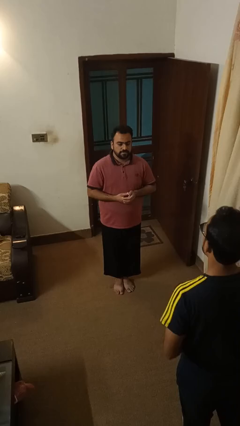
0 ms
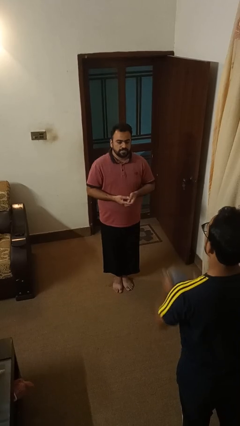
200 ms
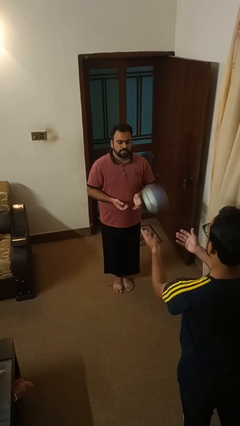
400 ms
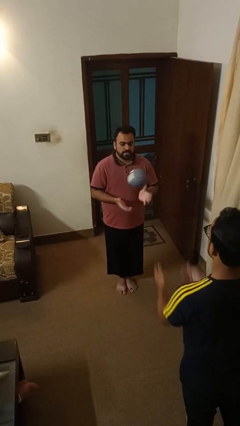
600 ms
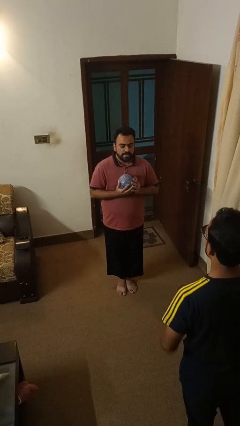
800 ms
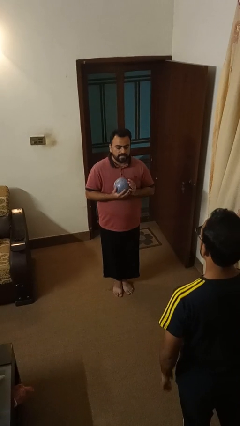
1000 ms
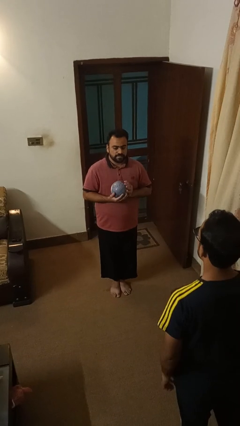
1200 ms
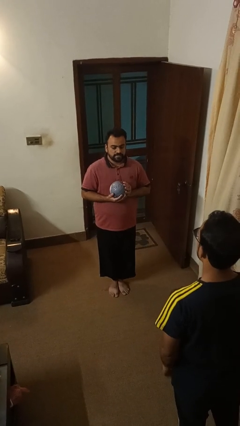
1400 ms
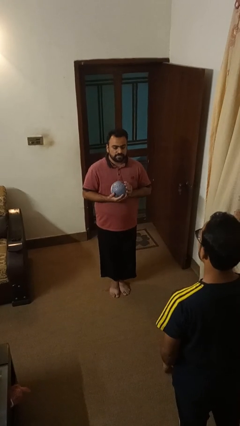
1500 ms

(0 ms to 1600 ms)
person catches object from person

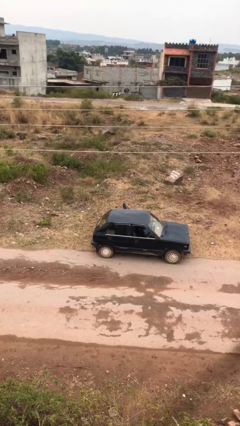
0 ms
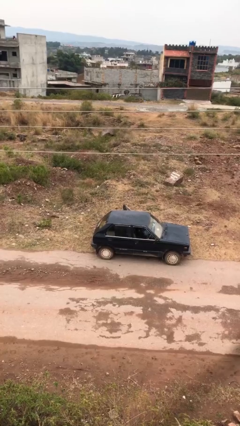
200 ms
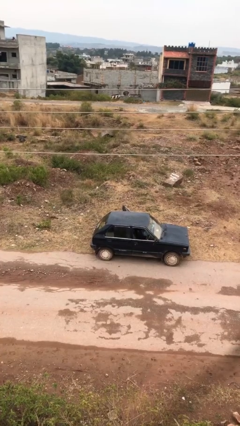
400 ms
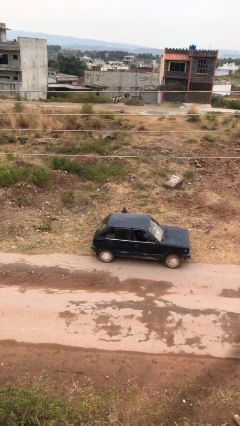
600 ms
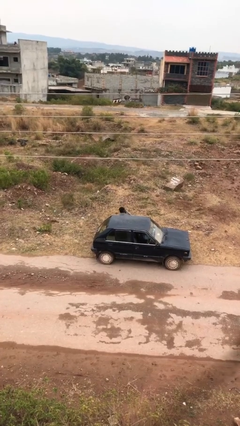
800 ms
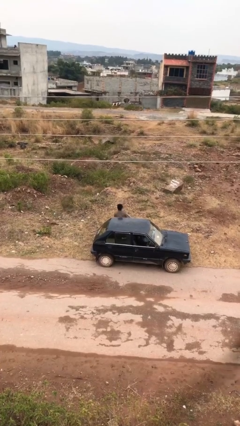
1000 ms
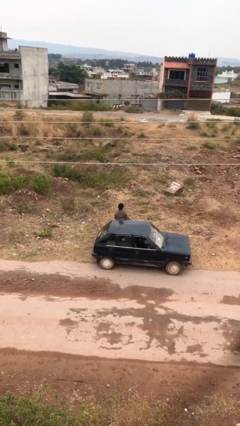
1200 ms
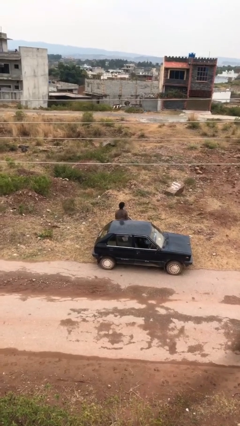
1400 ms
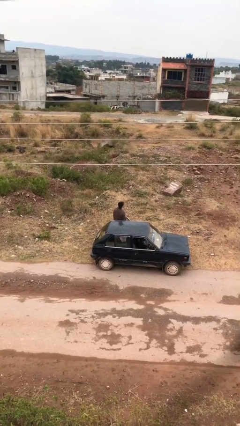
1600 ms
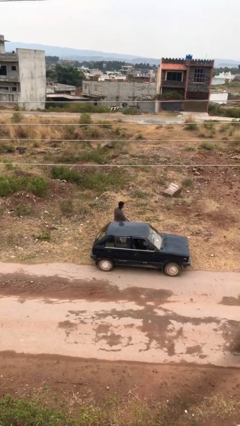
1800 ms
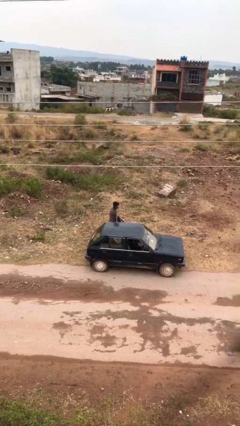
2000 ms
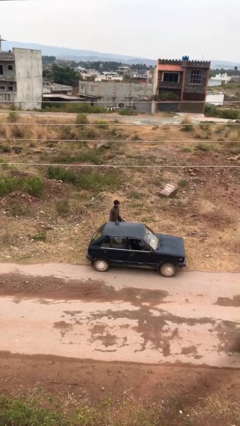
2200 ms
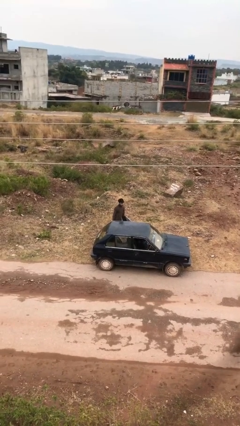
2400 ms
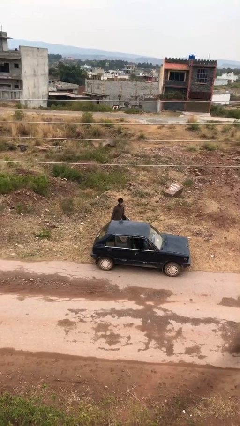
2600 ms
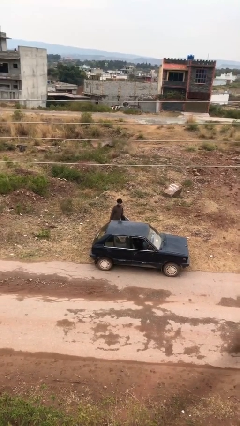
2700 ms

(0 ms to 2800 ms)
person exits car

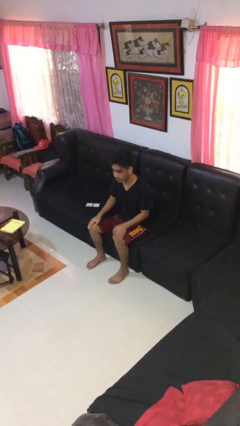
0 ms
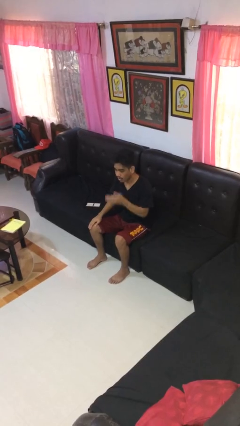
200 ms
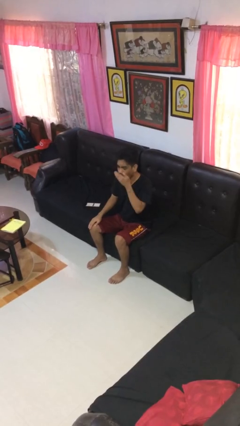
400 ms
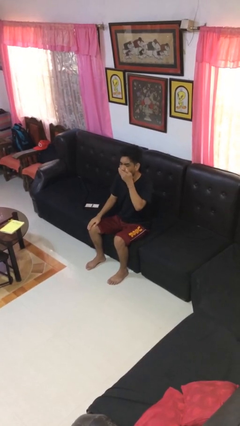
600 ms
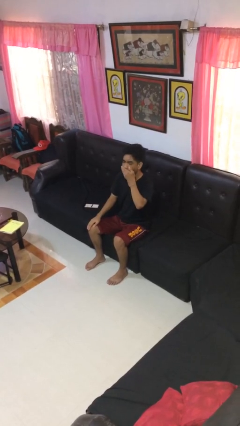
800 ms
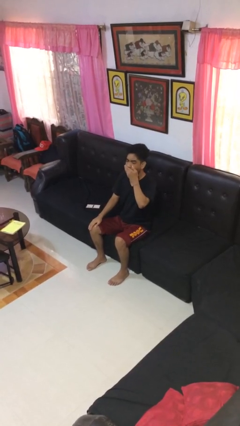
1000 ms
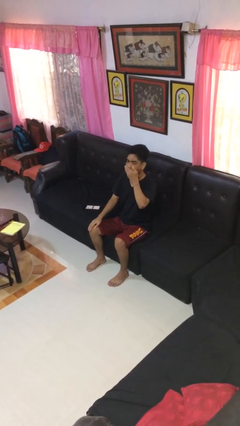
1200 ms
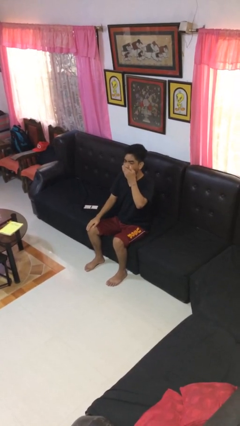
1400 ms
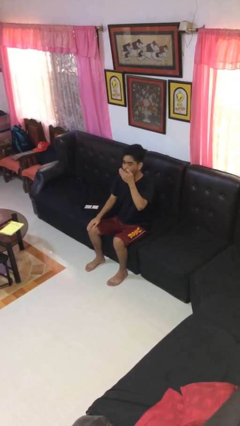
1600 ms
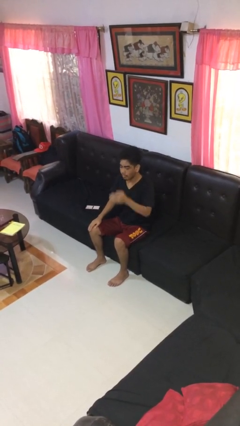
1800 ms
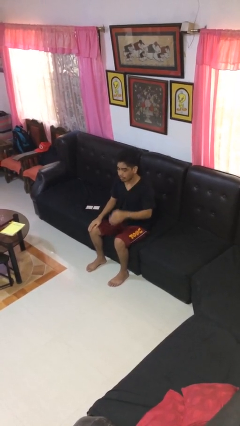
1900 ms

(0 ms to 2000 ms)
person yawns

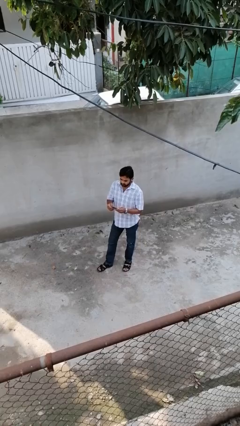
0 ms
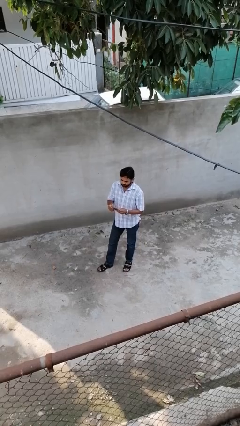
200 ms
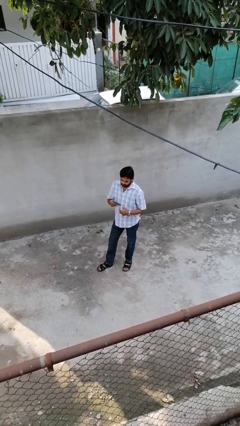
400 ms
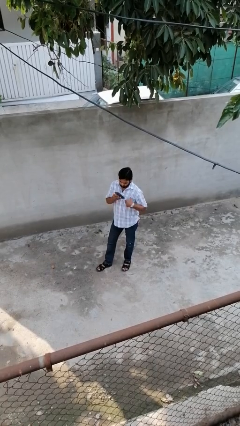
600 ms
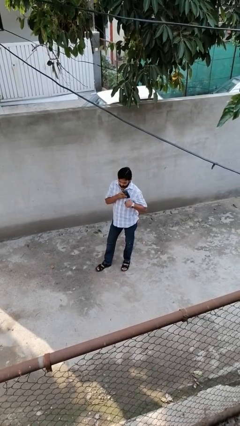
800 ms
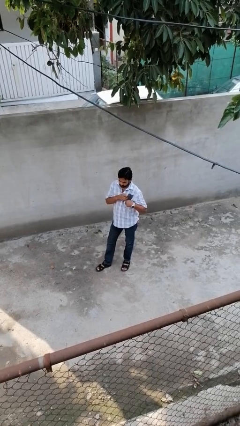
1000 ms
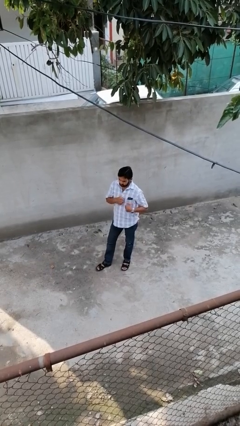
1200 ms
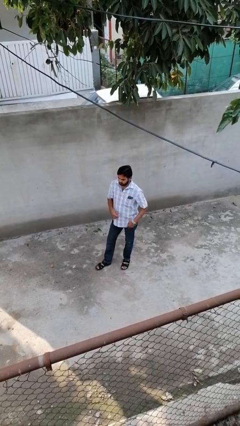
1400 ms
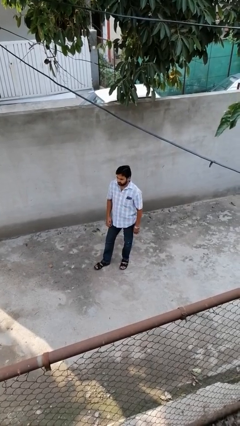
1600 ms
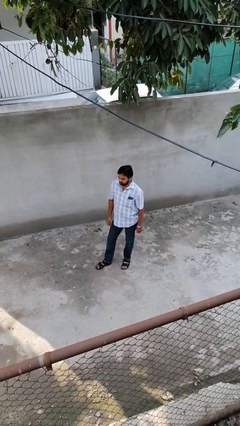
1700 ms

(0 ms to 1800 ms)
person puts phone into pocket

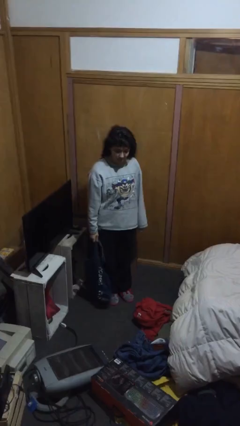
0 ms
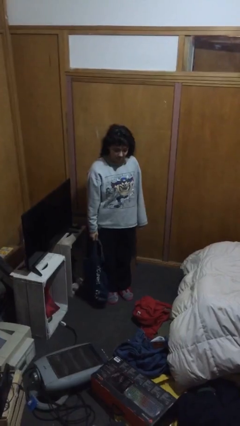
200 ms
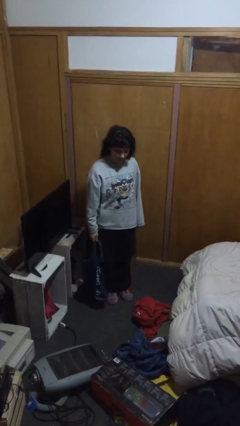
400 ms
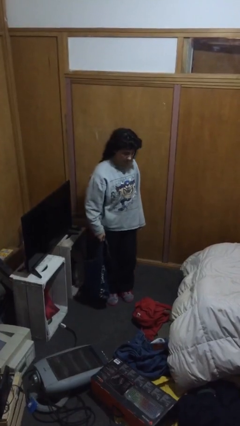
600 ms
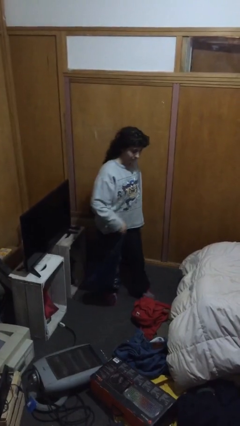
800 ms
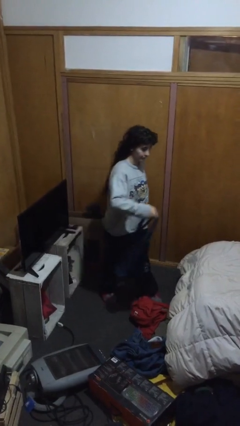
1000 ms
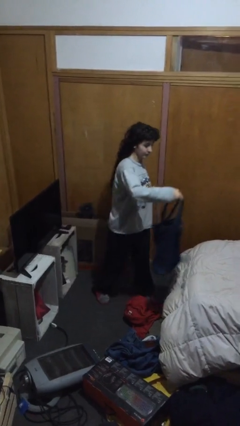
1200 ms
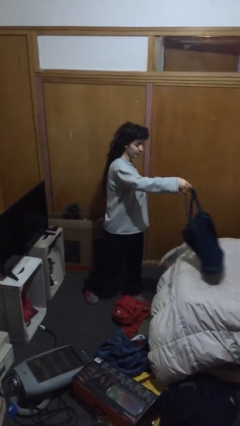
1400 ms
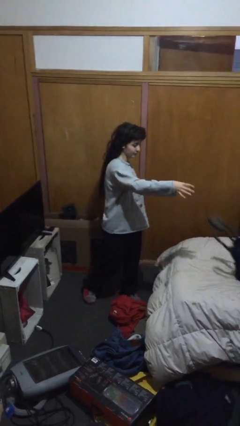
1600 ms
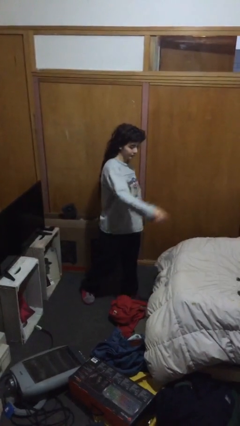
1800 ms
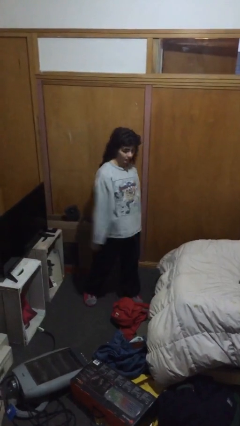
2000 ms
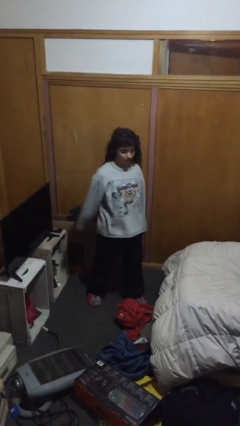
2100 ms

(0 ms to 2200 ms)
person throws object on bed

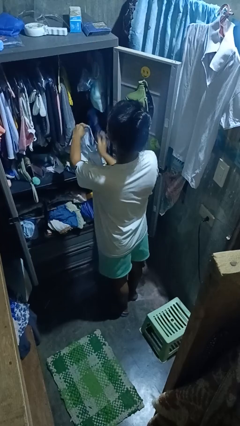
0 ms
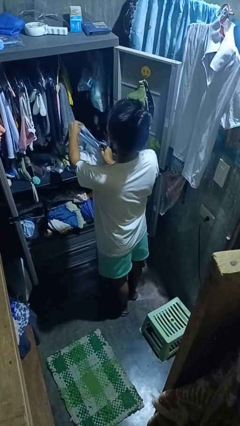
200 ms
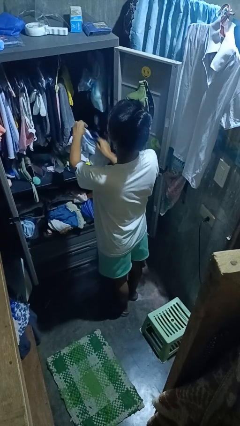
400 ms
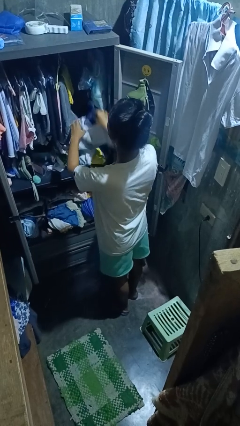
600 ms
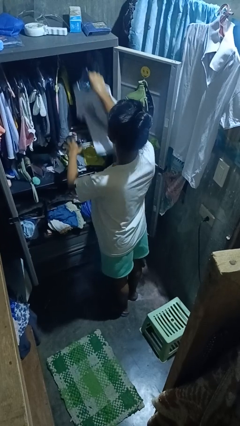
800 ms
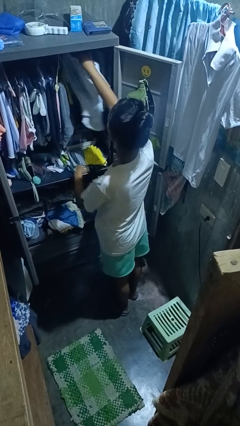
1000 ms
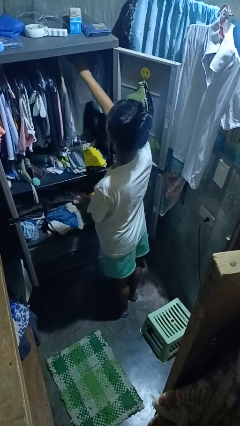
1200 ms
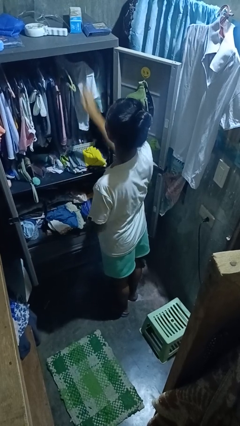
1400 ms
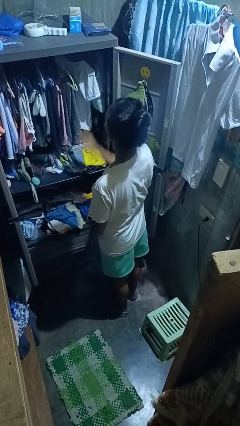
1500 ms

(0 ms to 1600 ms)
person puts clothes into closet

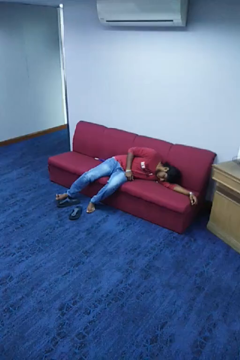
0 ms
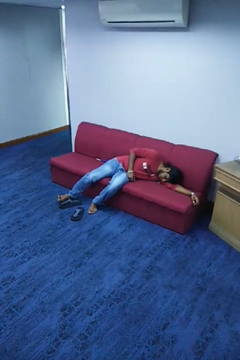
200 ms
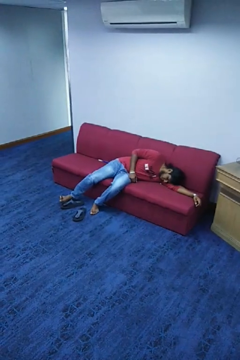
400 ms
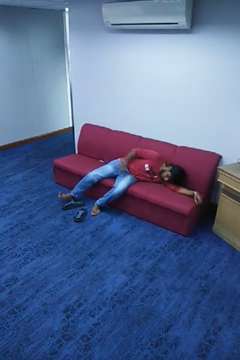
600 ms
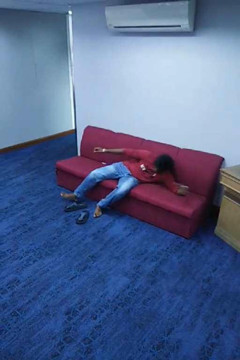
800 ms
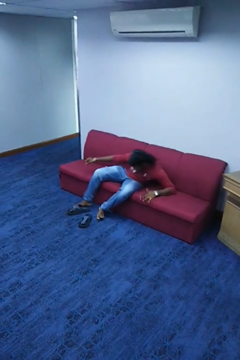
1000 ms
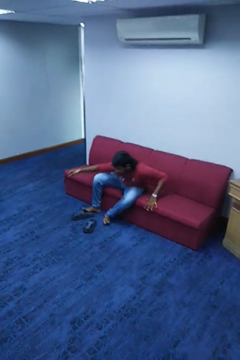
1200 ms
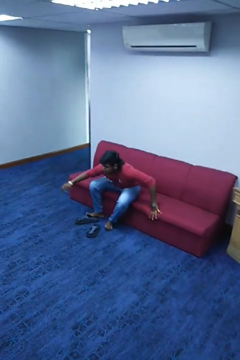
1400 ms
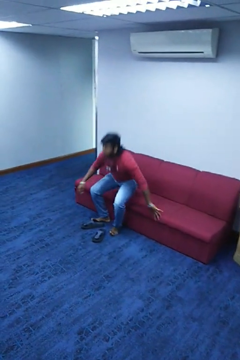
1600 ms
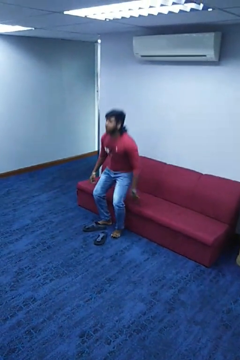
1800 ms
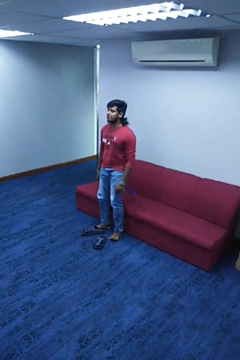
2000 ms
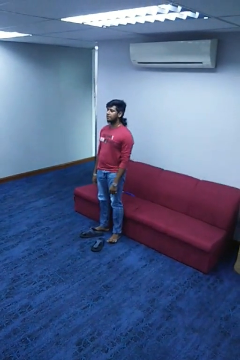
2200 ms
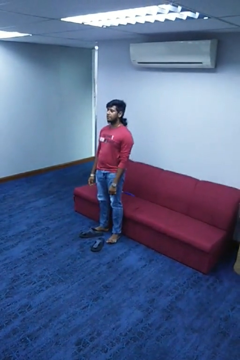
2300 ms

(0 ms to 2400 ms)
person stands up

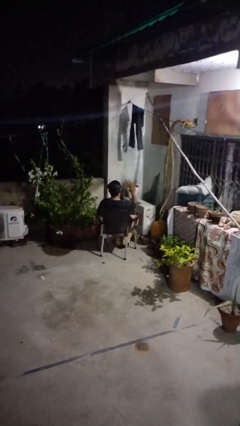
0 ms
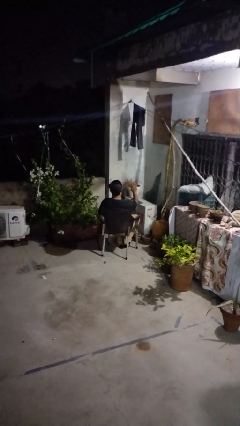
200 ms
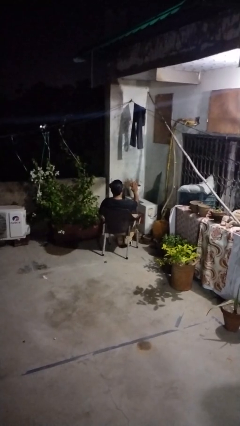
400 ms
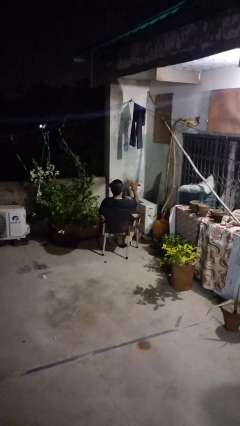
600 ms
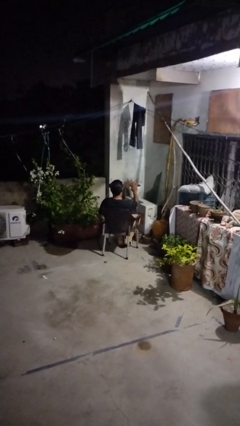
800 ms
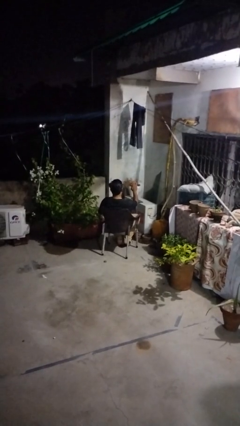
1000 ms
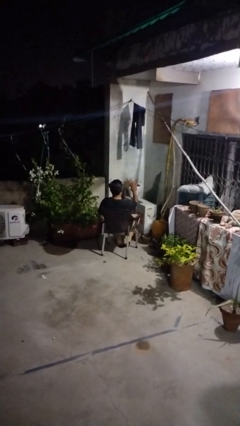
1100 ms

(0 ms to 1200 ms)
person gestures stop

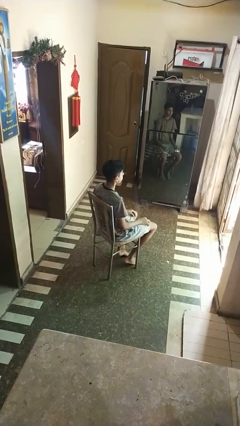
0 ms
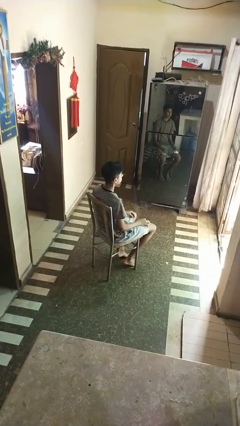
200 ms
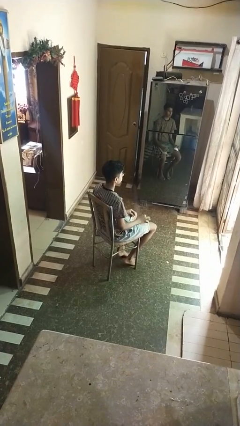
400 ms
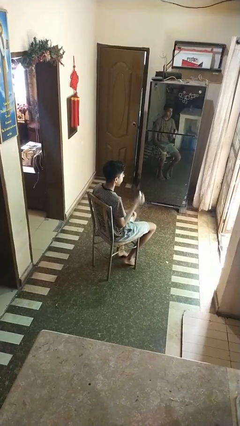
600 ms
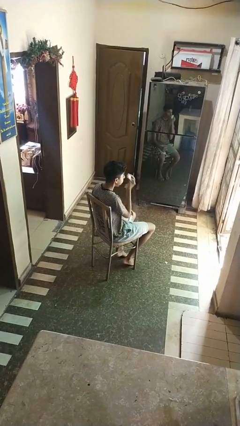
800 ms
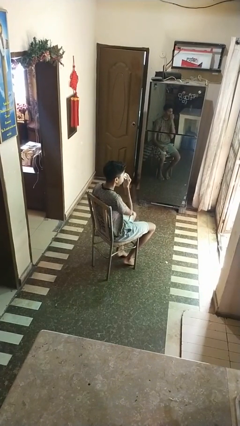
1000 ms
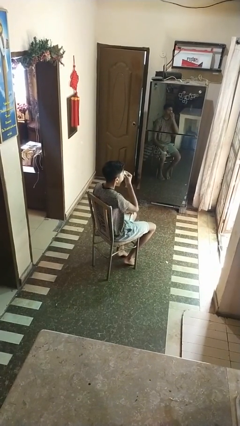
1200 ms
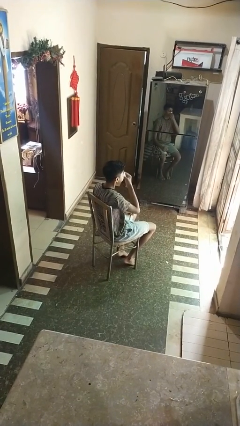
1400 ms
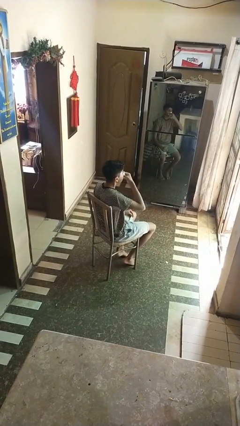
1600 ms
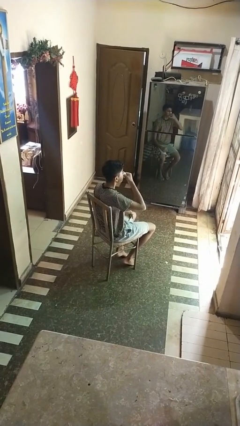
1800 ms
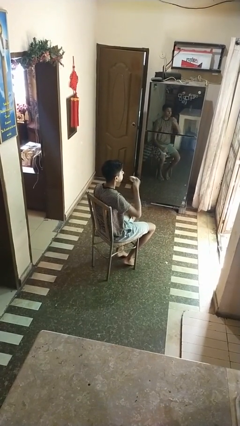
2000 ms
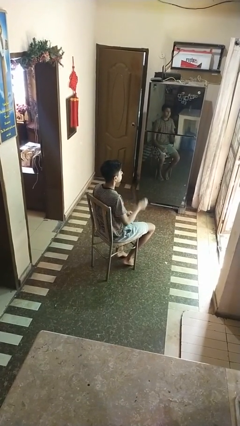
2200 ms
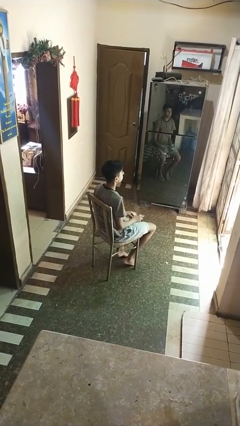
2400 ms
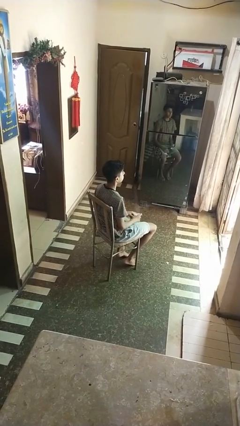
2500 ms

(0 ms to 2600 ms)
person blows nose
